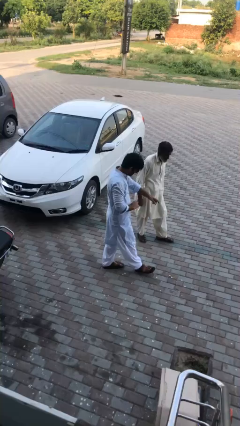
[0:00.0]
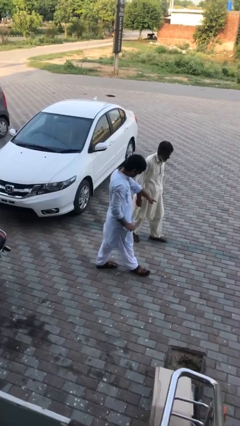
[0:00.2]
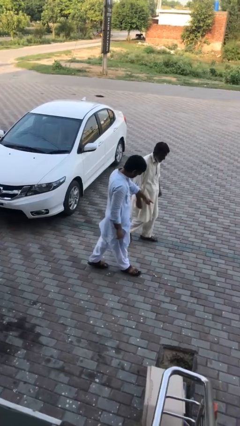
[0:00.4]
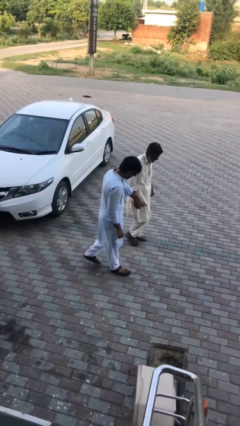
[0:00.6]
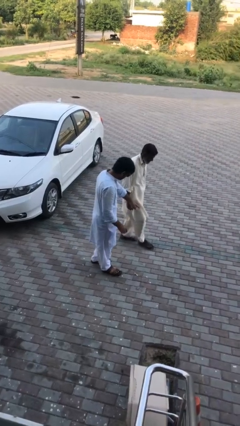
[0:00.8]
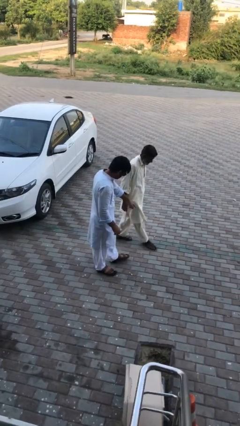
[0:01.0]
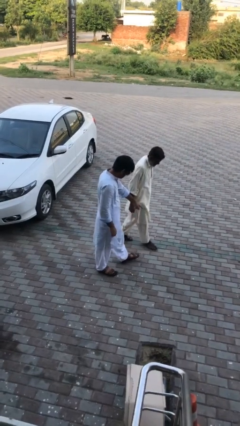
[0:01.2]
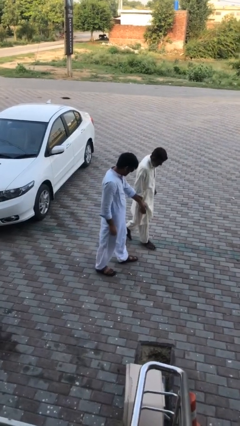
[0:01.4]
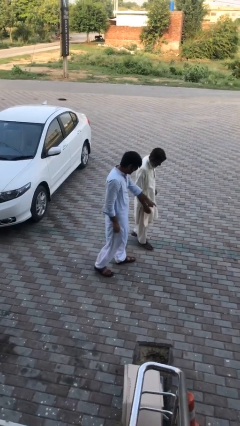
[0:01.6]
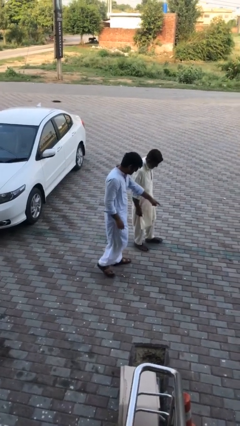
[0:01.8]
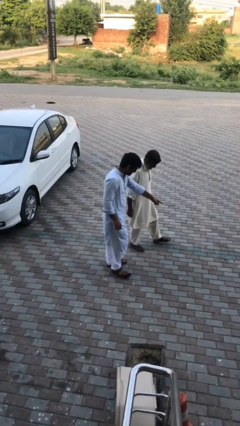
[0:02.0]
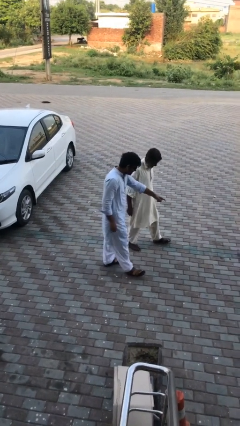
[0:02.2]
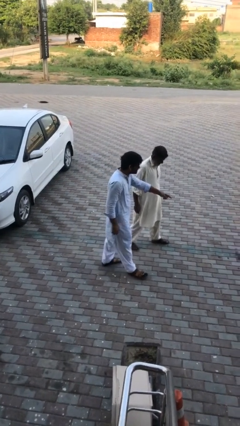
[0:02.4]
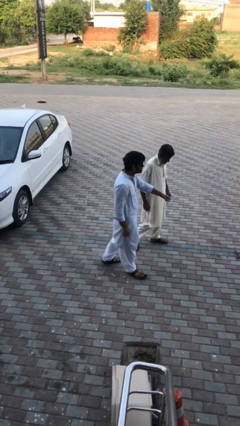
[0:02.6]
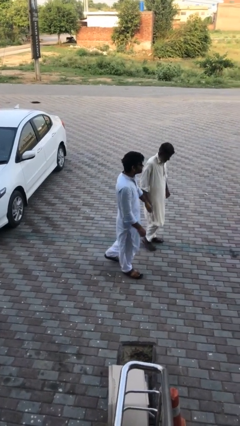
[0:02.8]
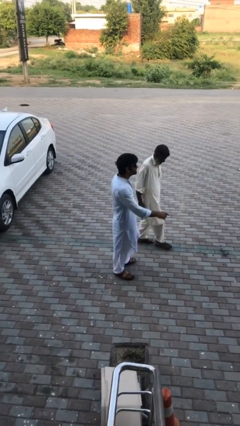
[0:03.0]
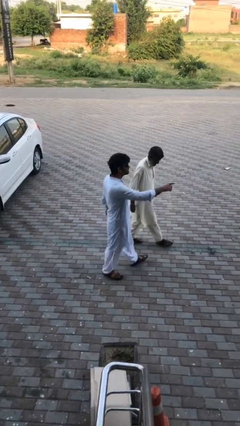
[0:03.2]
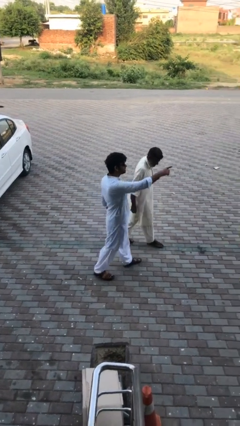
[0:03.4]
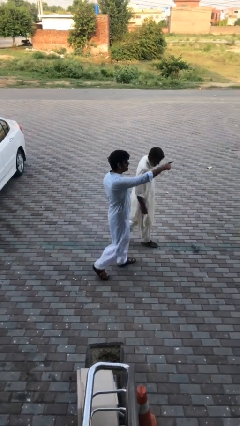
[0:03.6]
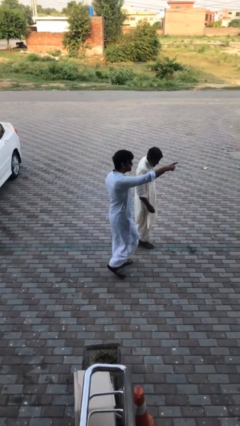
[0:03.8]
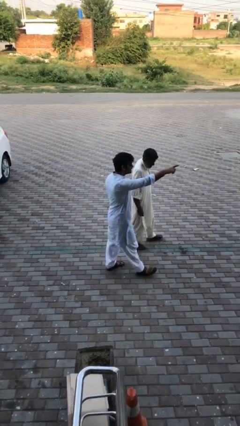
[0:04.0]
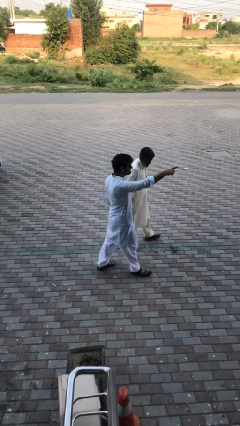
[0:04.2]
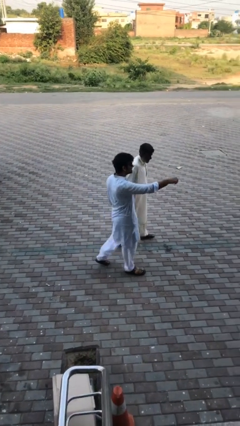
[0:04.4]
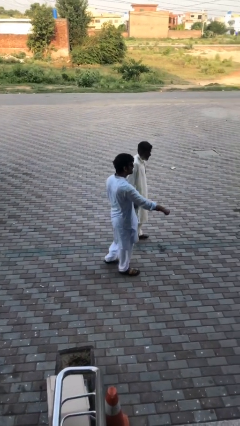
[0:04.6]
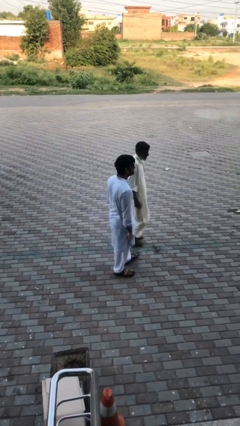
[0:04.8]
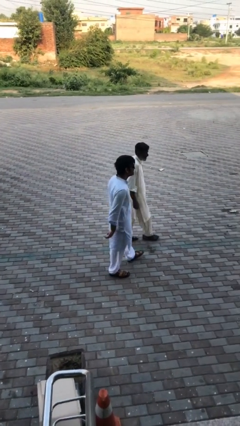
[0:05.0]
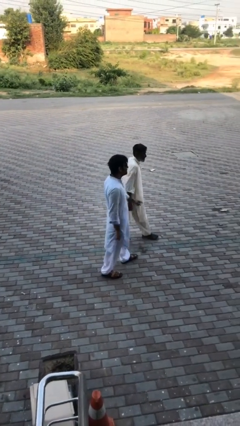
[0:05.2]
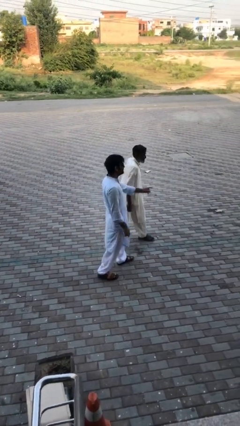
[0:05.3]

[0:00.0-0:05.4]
person talks to person

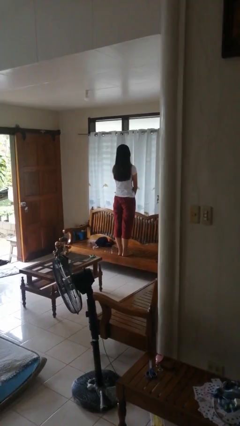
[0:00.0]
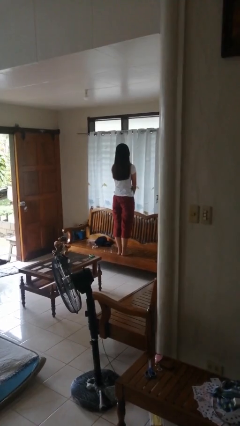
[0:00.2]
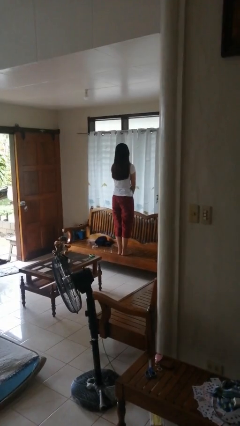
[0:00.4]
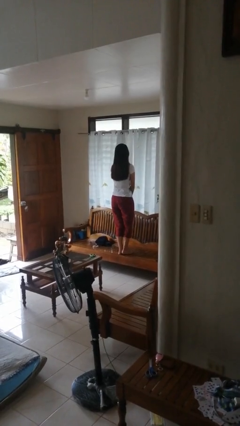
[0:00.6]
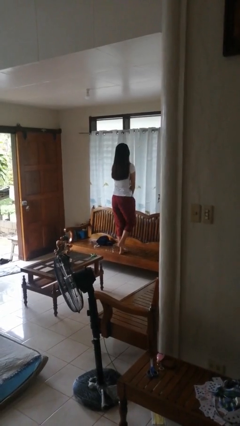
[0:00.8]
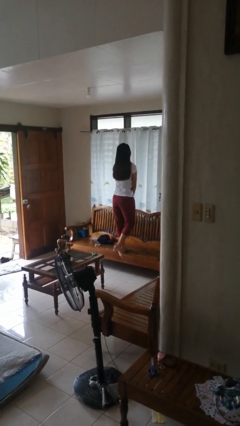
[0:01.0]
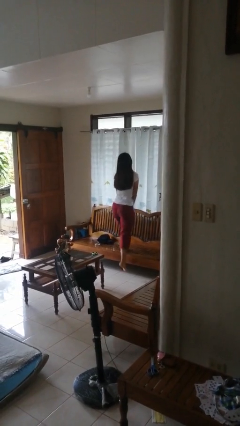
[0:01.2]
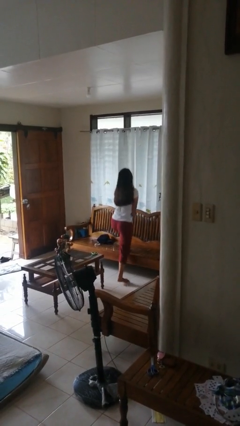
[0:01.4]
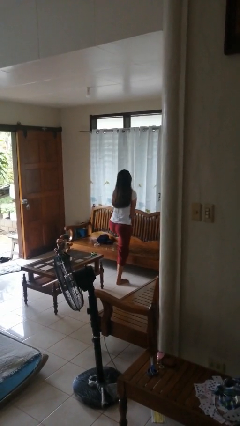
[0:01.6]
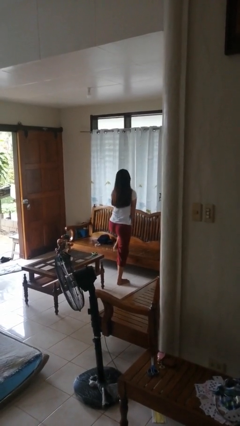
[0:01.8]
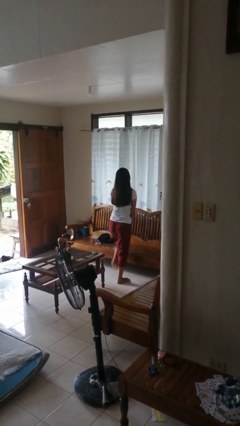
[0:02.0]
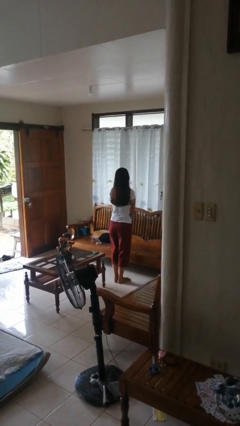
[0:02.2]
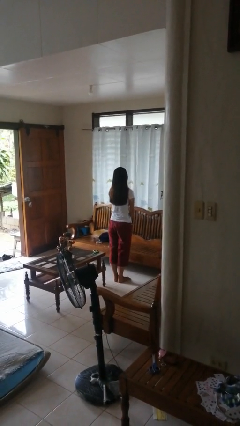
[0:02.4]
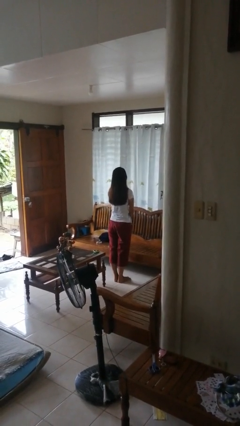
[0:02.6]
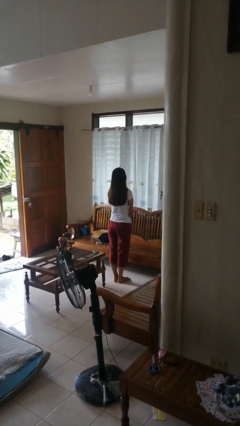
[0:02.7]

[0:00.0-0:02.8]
person climbs off chair

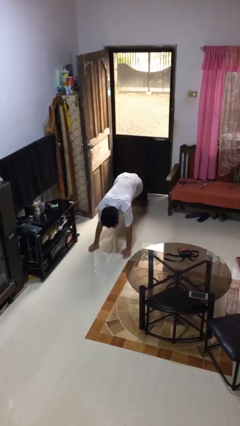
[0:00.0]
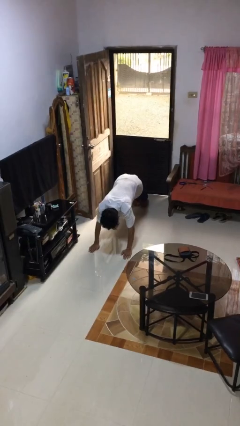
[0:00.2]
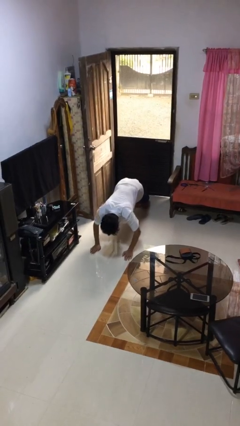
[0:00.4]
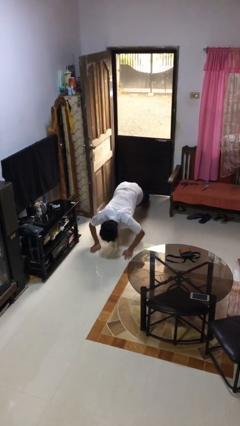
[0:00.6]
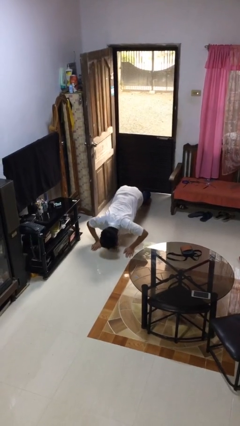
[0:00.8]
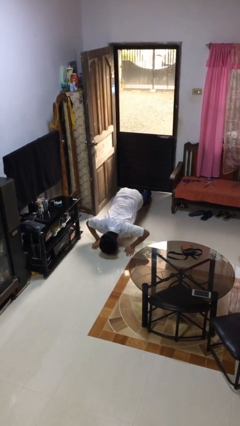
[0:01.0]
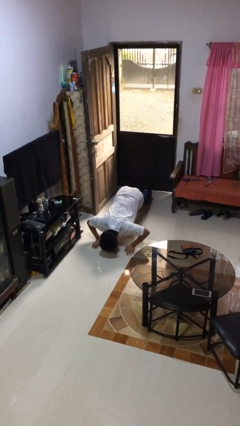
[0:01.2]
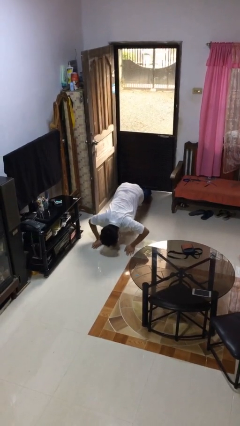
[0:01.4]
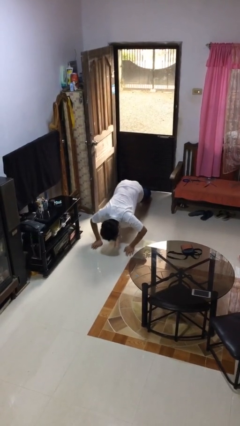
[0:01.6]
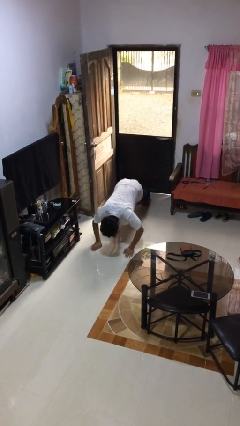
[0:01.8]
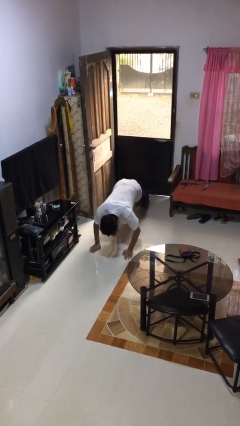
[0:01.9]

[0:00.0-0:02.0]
person exercises with pushup

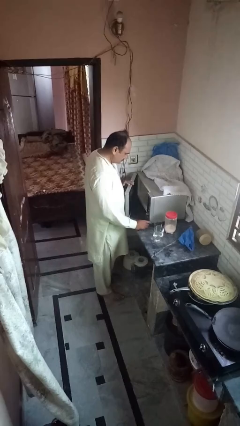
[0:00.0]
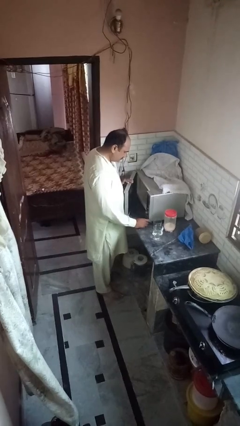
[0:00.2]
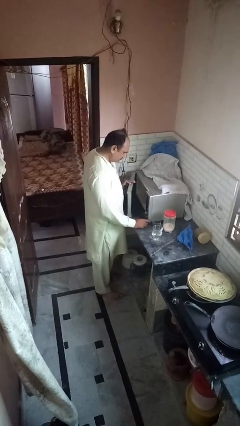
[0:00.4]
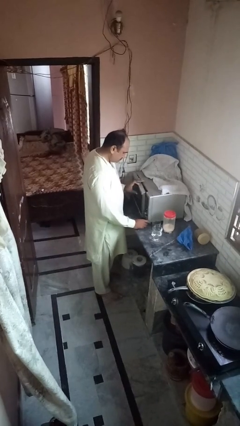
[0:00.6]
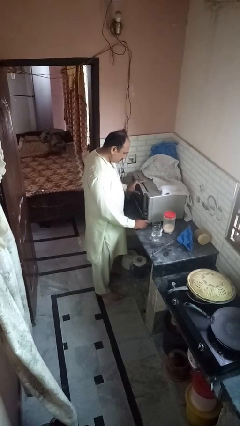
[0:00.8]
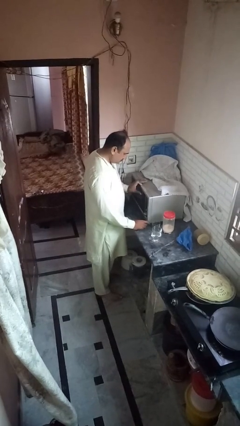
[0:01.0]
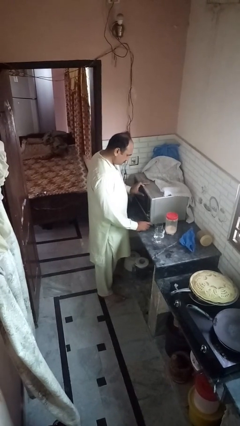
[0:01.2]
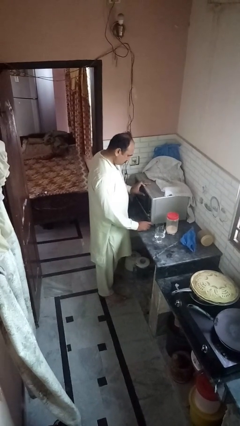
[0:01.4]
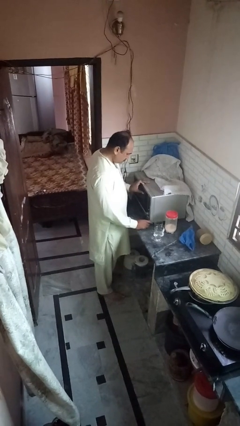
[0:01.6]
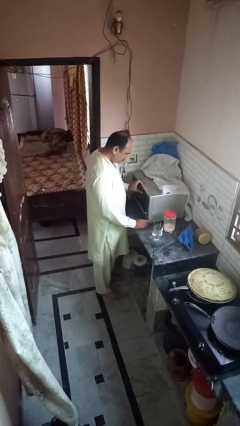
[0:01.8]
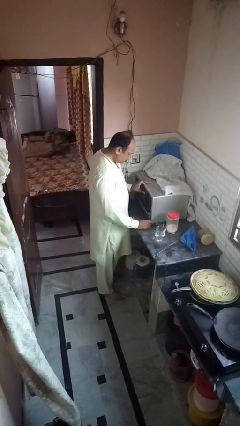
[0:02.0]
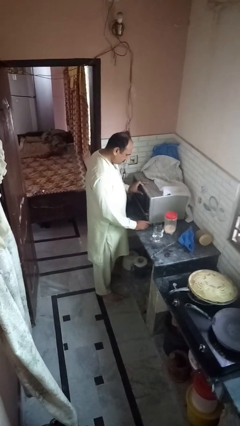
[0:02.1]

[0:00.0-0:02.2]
person closes microwave

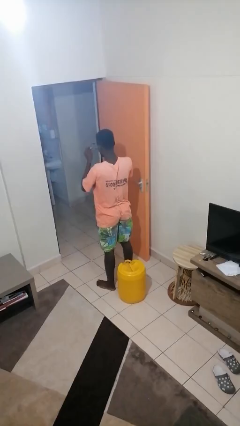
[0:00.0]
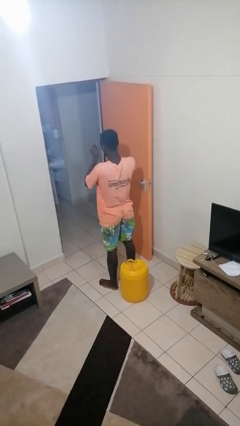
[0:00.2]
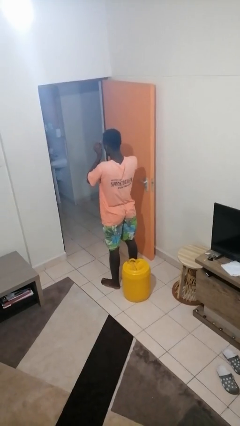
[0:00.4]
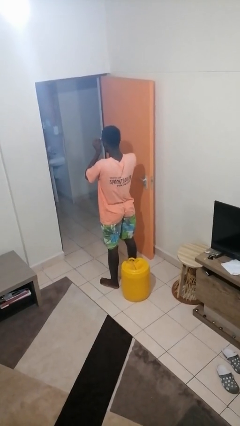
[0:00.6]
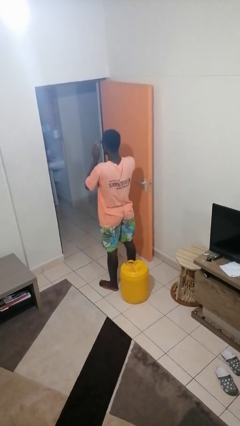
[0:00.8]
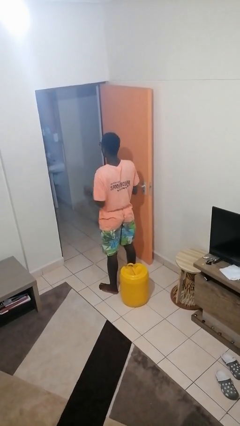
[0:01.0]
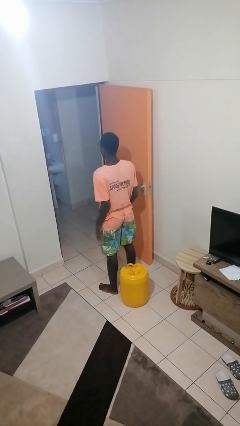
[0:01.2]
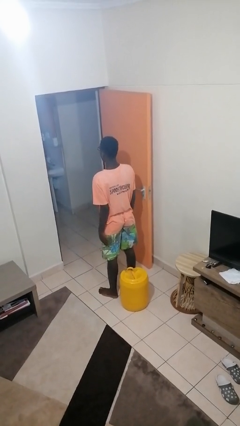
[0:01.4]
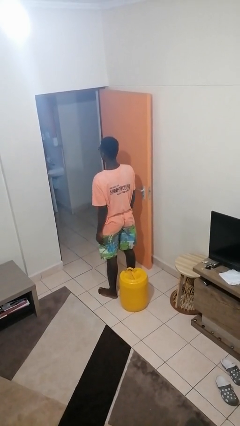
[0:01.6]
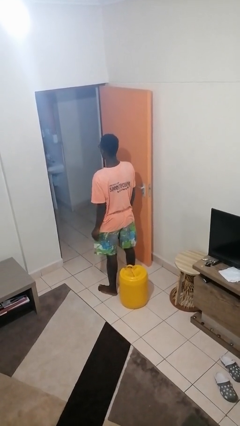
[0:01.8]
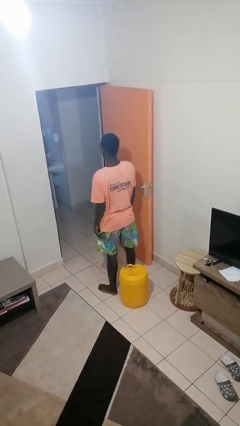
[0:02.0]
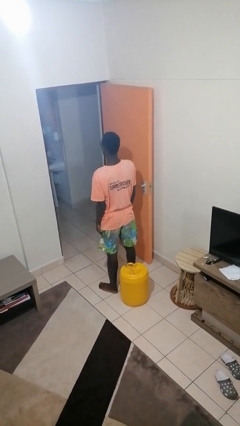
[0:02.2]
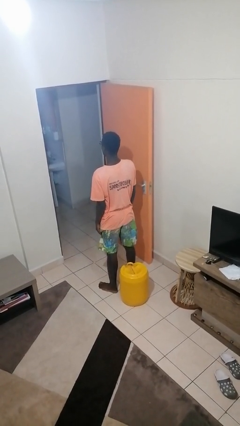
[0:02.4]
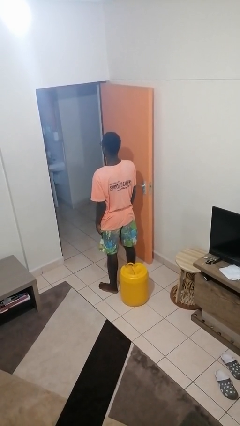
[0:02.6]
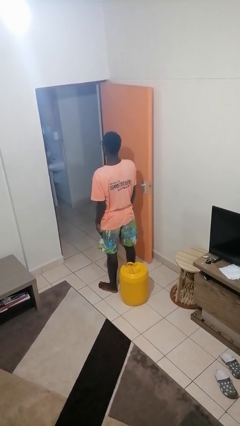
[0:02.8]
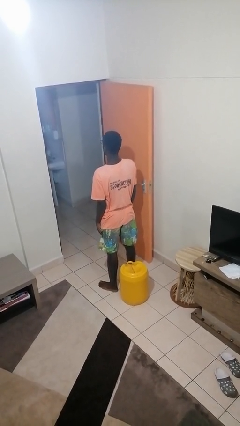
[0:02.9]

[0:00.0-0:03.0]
person puts on glasses

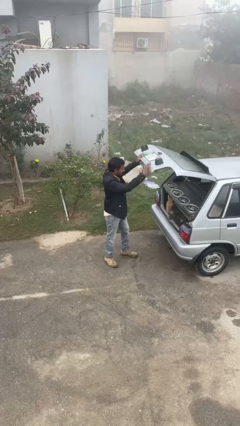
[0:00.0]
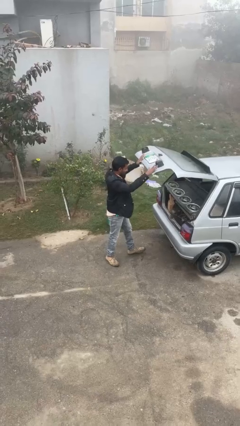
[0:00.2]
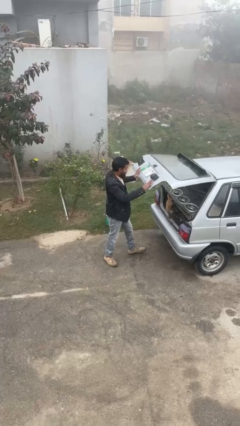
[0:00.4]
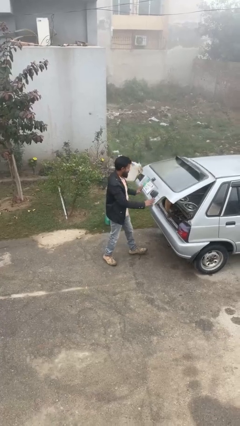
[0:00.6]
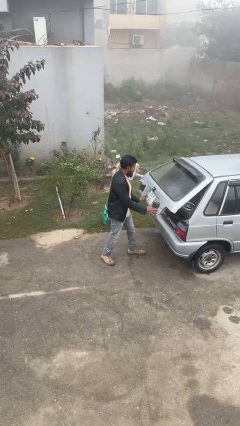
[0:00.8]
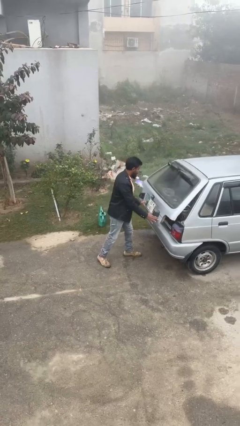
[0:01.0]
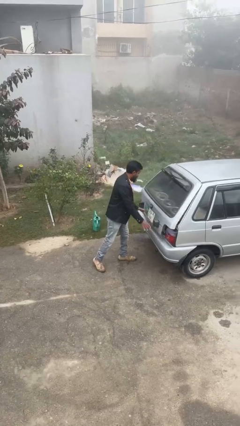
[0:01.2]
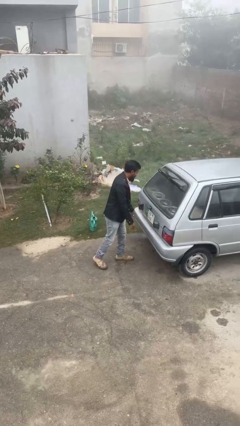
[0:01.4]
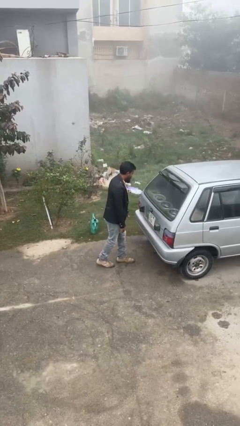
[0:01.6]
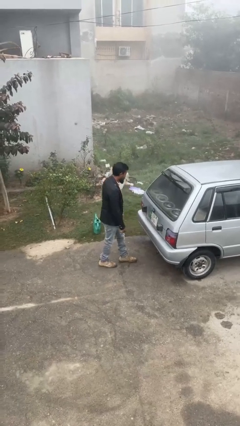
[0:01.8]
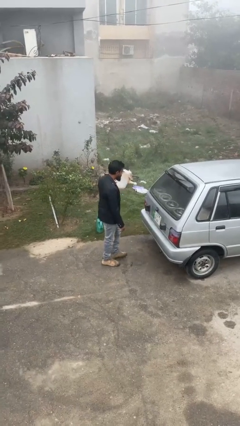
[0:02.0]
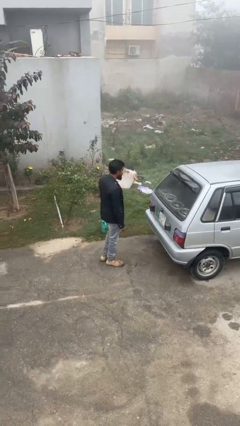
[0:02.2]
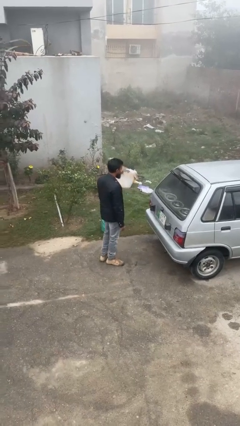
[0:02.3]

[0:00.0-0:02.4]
person closes car trunk
